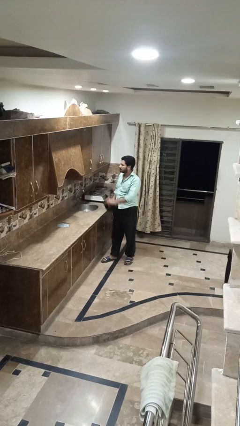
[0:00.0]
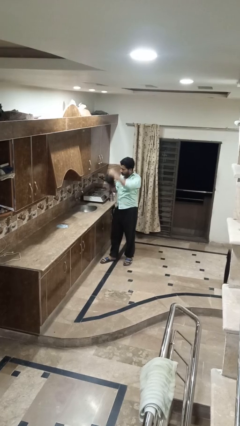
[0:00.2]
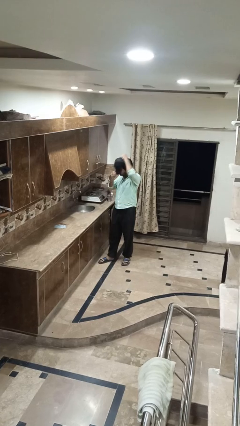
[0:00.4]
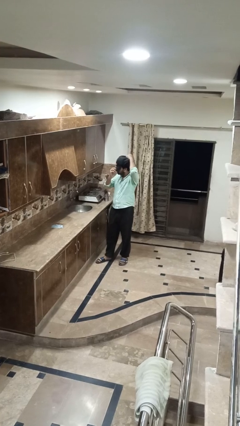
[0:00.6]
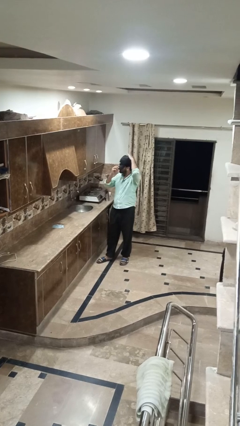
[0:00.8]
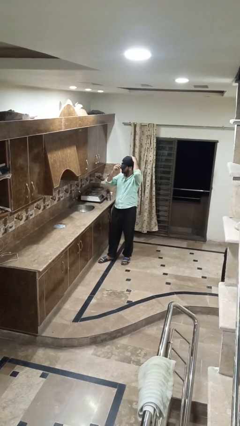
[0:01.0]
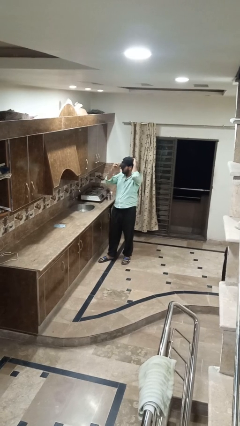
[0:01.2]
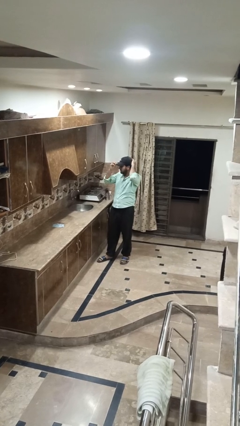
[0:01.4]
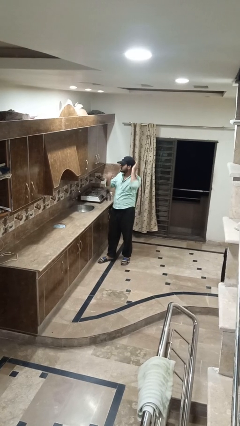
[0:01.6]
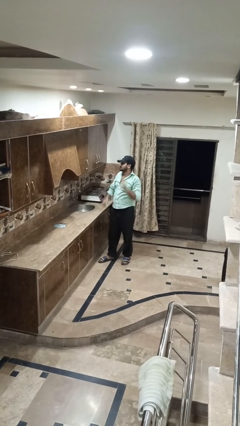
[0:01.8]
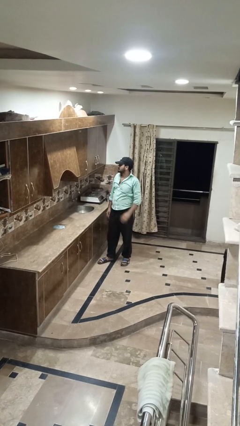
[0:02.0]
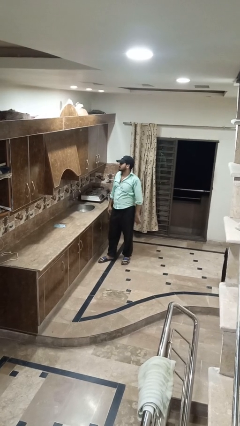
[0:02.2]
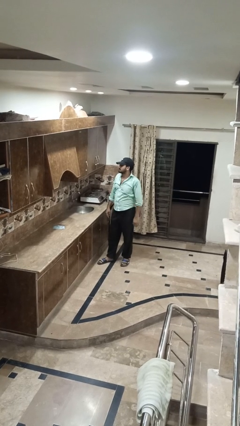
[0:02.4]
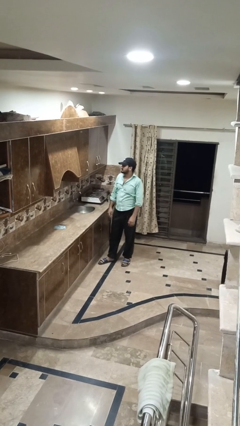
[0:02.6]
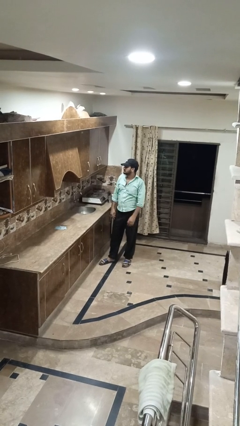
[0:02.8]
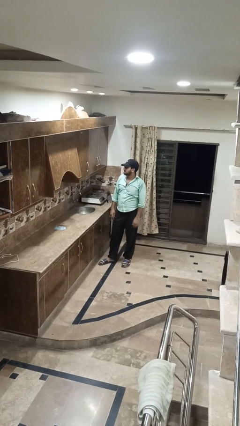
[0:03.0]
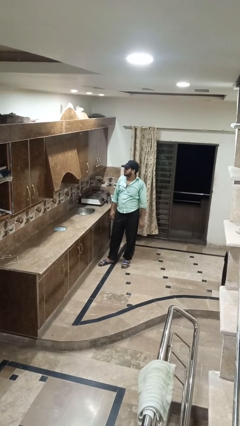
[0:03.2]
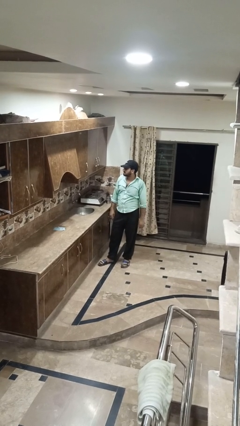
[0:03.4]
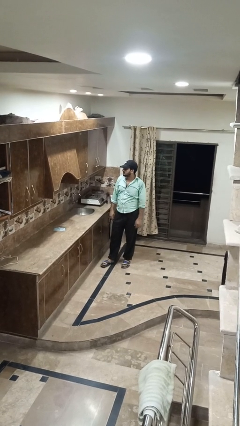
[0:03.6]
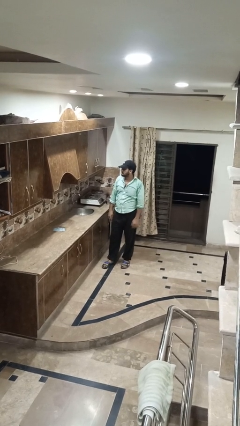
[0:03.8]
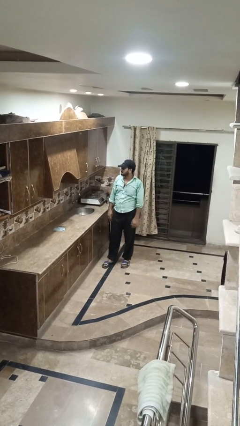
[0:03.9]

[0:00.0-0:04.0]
person puts on hat

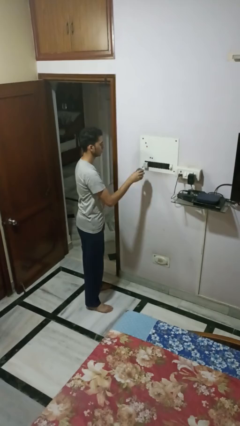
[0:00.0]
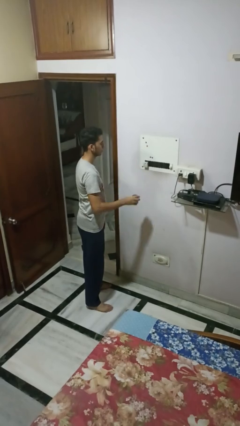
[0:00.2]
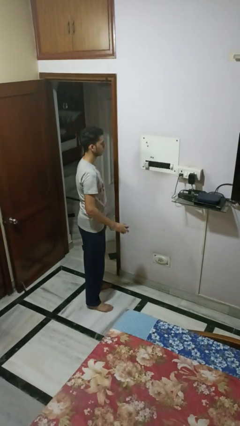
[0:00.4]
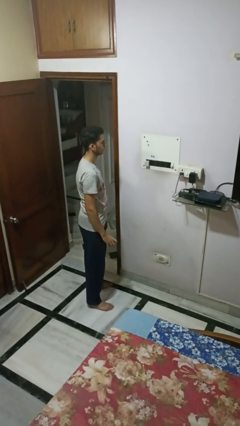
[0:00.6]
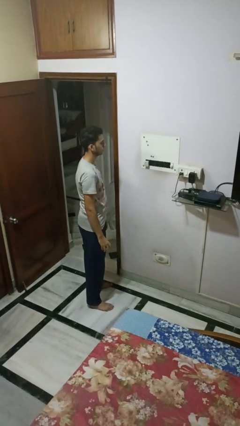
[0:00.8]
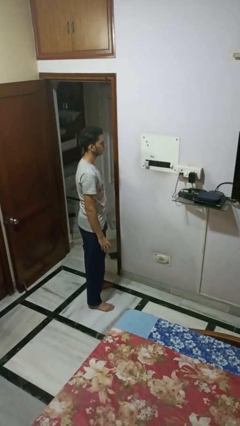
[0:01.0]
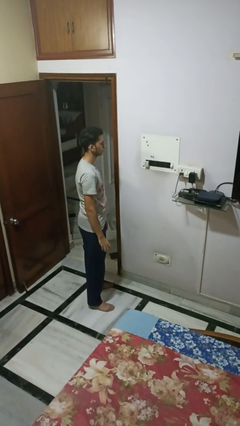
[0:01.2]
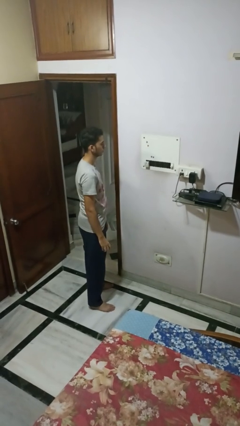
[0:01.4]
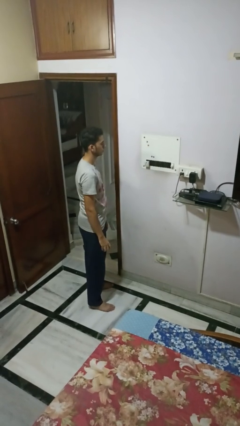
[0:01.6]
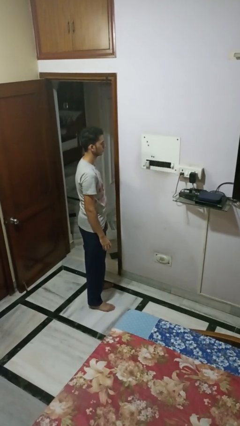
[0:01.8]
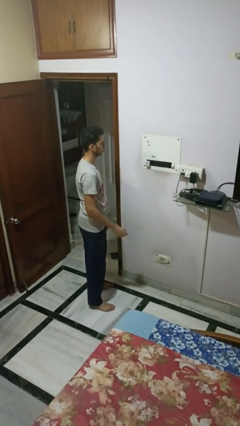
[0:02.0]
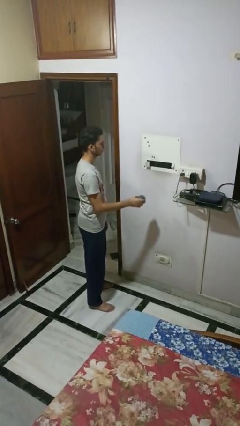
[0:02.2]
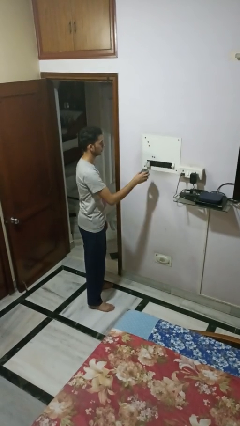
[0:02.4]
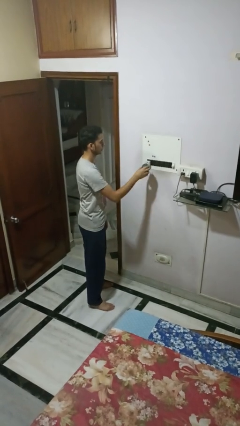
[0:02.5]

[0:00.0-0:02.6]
person unplugs from electrical socket

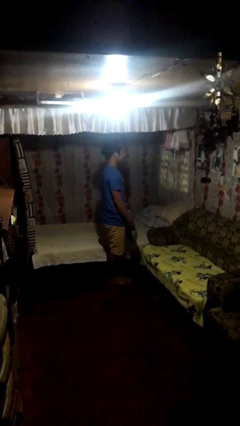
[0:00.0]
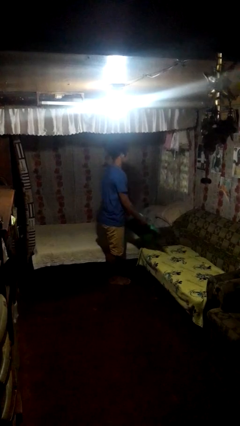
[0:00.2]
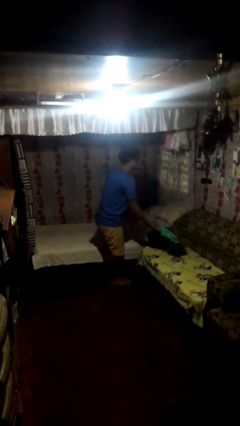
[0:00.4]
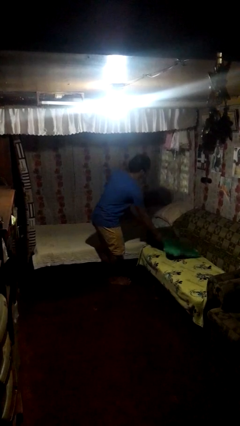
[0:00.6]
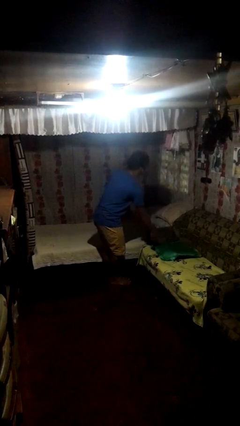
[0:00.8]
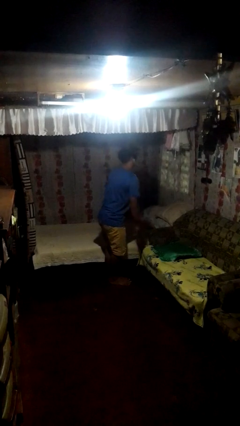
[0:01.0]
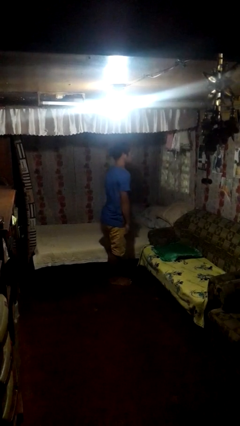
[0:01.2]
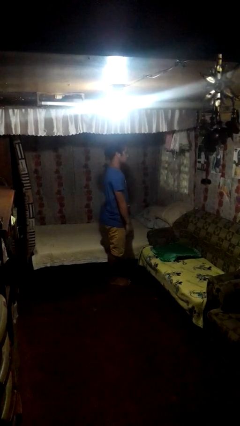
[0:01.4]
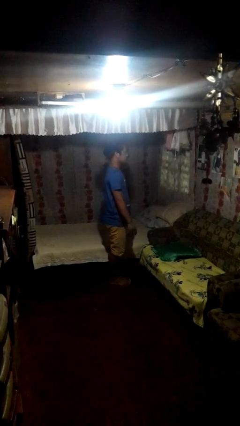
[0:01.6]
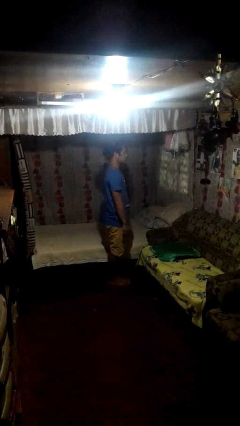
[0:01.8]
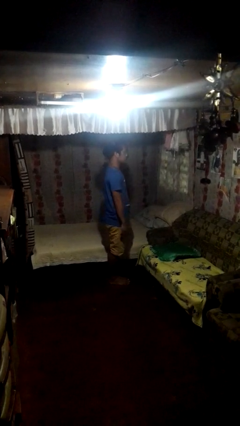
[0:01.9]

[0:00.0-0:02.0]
person puts down object on couch

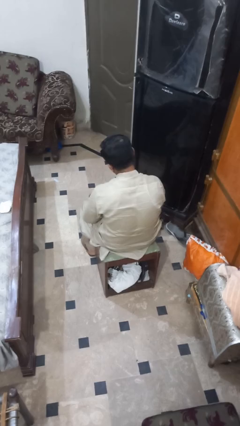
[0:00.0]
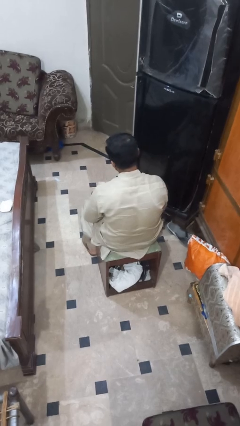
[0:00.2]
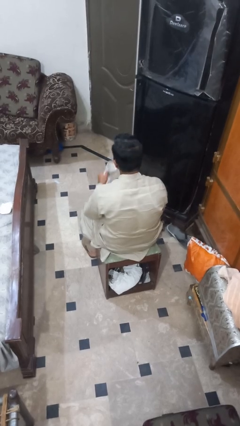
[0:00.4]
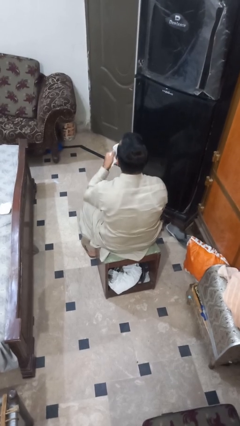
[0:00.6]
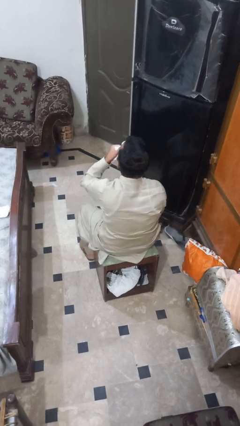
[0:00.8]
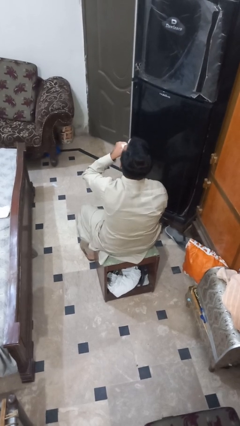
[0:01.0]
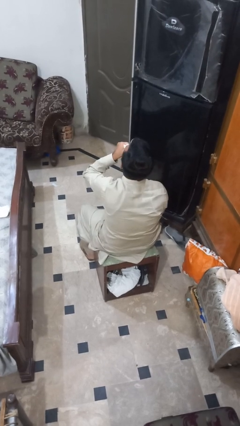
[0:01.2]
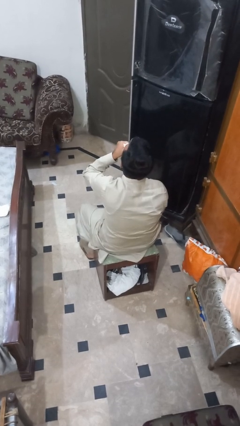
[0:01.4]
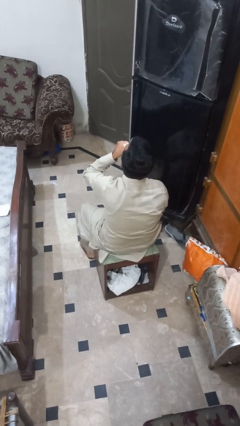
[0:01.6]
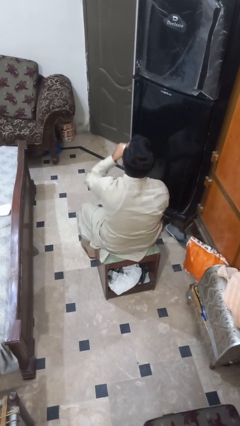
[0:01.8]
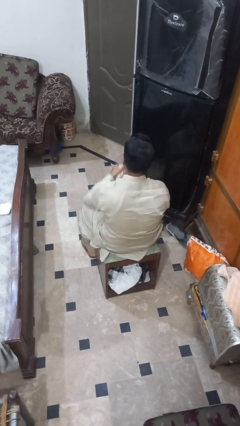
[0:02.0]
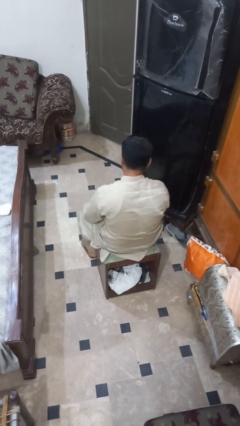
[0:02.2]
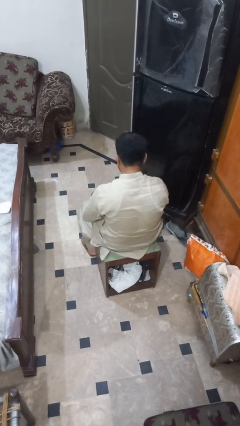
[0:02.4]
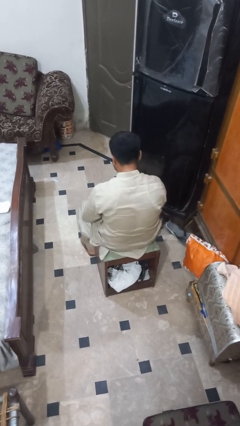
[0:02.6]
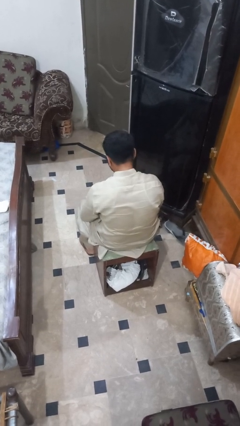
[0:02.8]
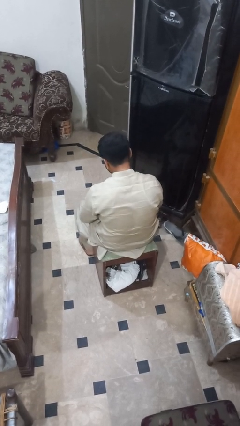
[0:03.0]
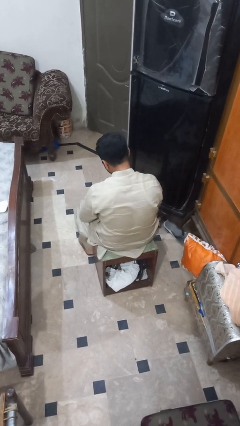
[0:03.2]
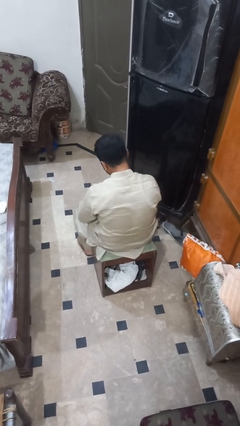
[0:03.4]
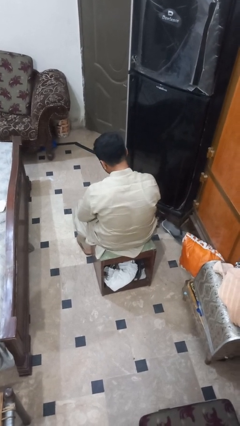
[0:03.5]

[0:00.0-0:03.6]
person drinks from mug

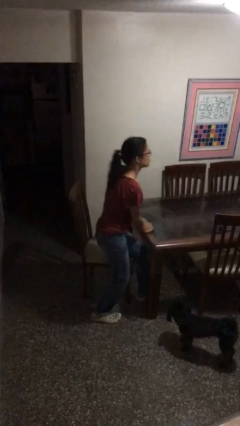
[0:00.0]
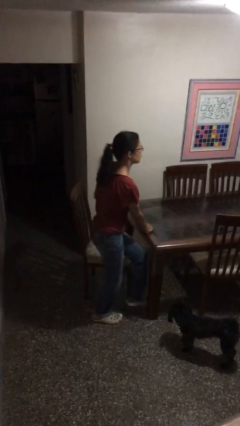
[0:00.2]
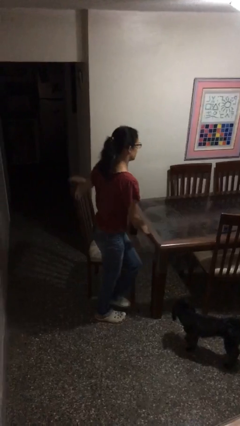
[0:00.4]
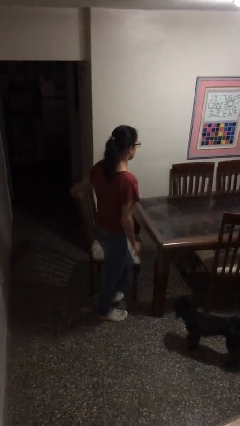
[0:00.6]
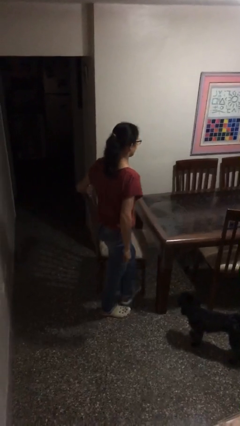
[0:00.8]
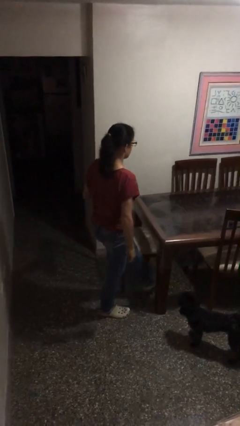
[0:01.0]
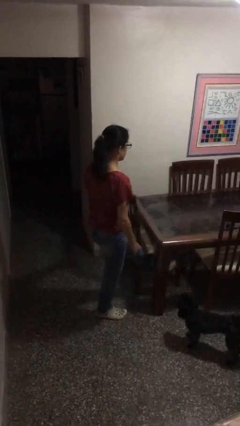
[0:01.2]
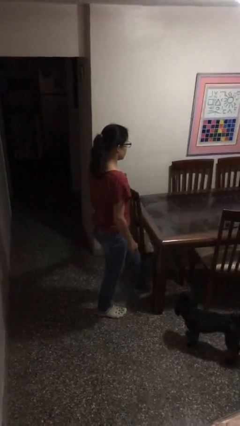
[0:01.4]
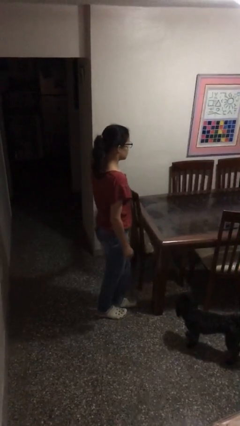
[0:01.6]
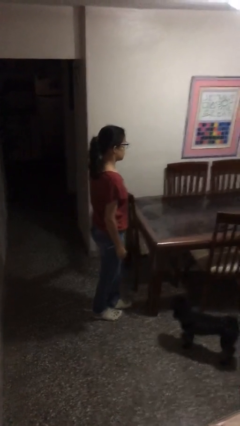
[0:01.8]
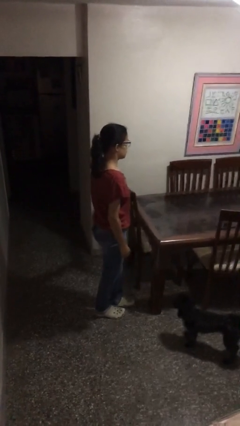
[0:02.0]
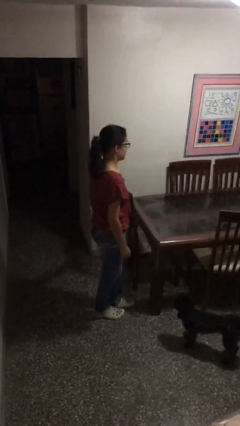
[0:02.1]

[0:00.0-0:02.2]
person stands up

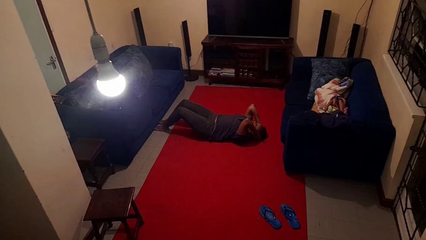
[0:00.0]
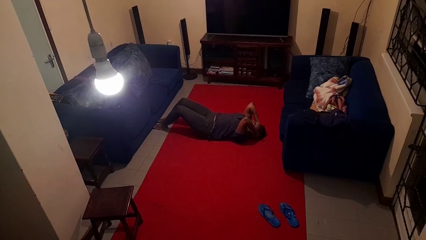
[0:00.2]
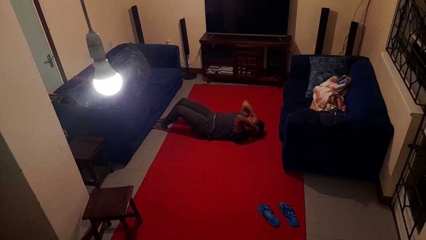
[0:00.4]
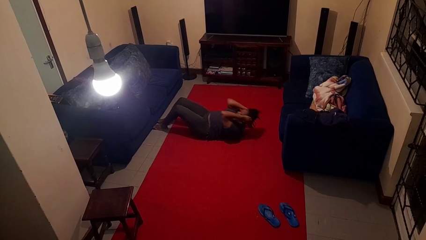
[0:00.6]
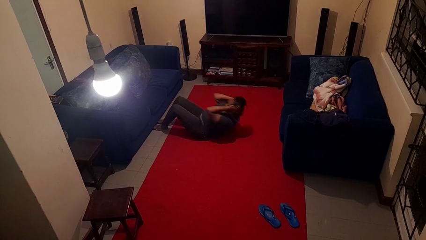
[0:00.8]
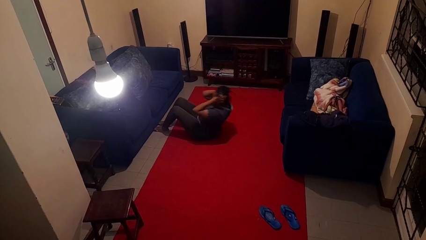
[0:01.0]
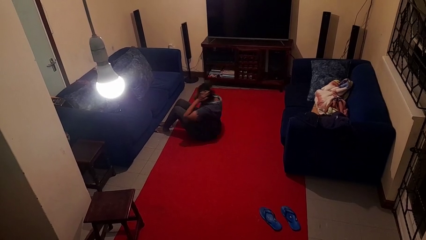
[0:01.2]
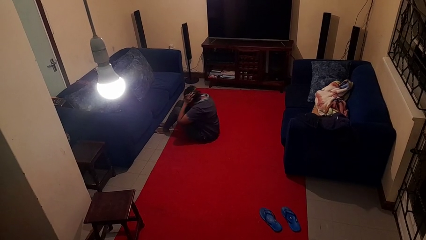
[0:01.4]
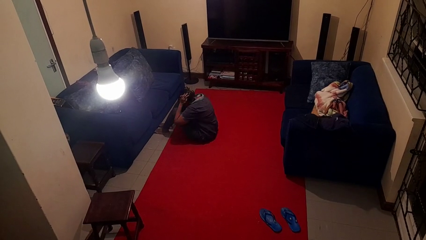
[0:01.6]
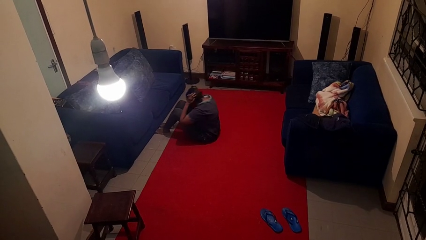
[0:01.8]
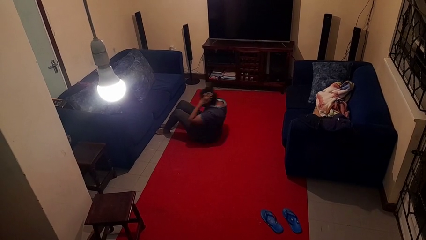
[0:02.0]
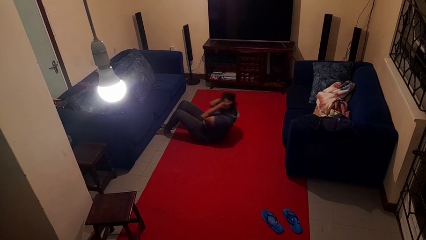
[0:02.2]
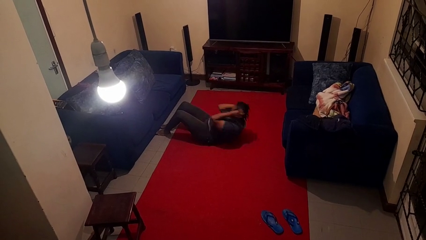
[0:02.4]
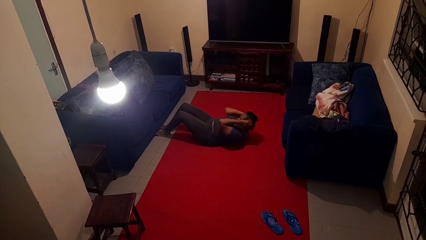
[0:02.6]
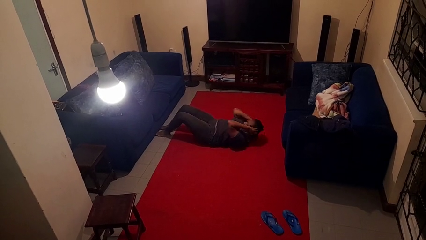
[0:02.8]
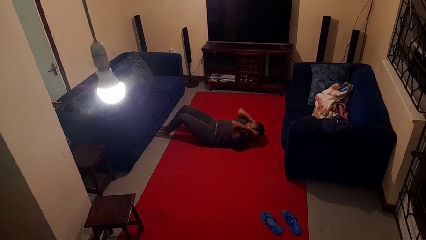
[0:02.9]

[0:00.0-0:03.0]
person exercises with situp
